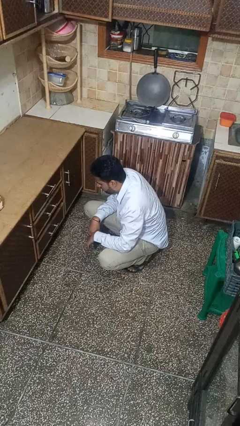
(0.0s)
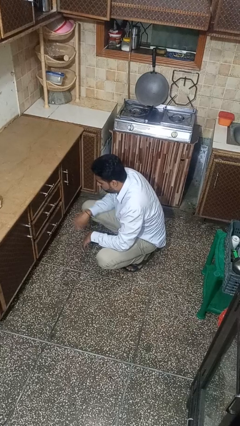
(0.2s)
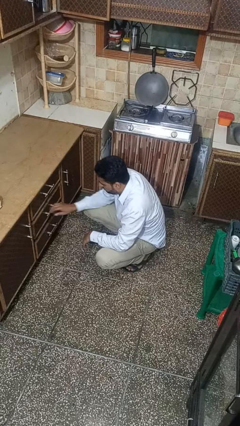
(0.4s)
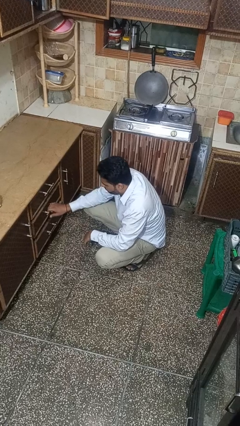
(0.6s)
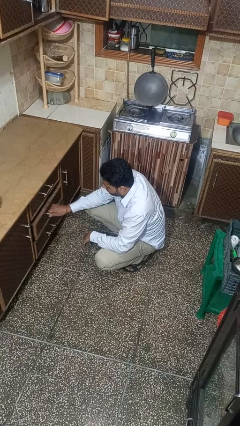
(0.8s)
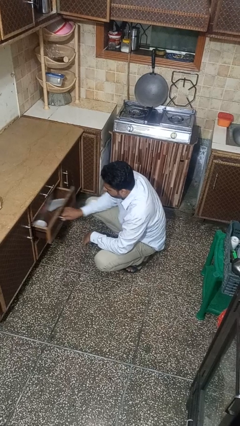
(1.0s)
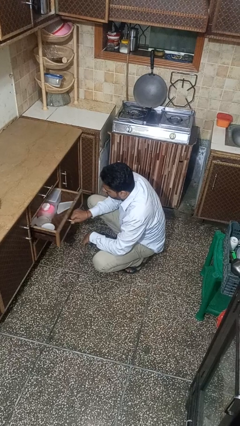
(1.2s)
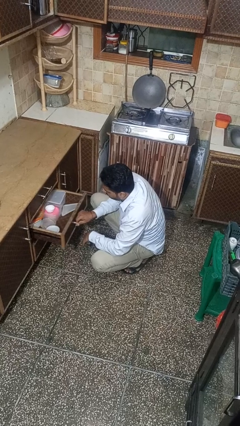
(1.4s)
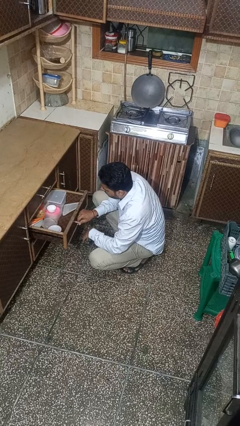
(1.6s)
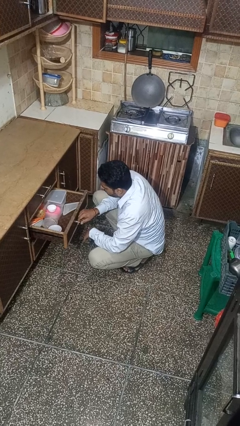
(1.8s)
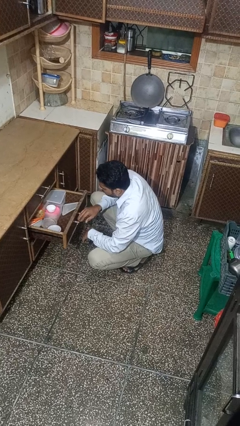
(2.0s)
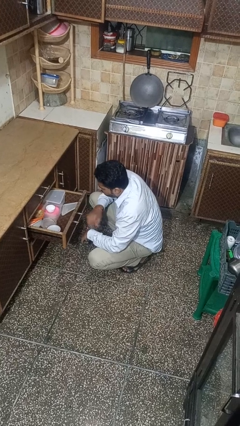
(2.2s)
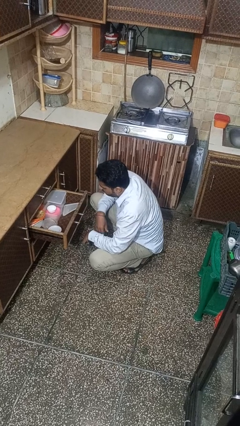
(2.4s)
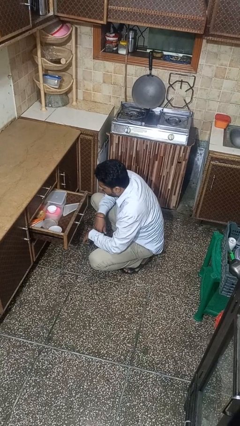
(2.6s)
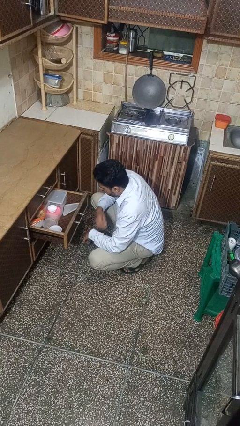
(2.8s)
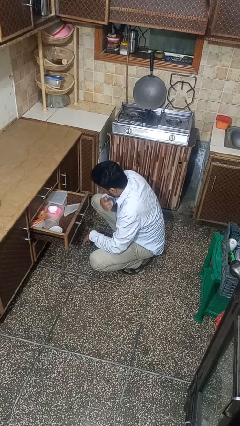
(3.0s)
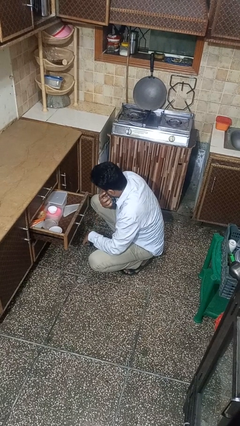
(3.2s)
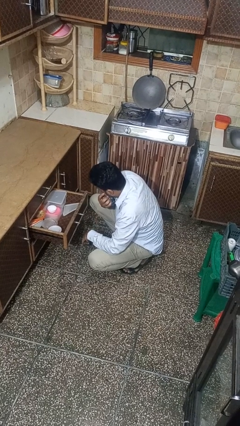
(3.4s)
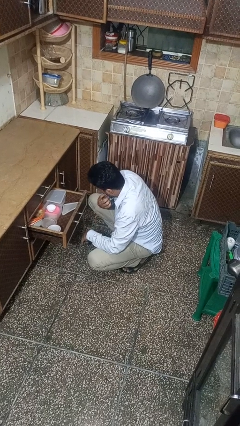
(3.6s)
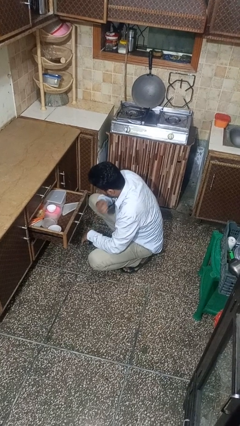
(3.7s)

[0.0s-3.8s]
person opens kitchen drawer

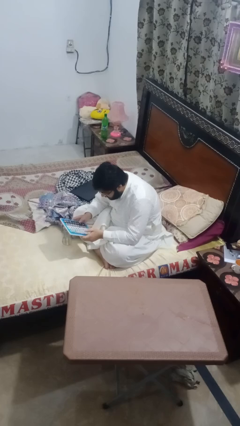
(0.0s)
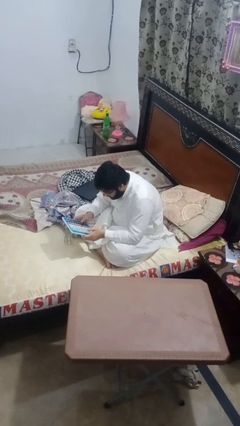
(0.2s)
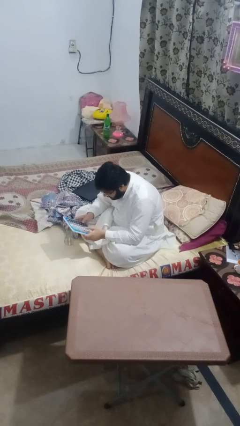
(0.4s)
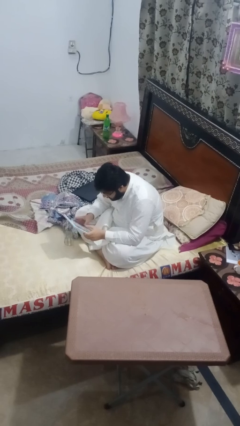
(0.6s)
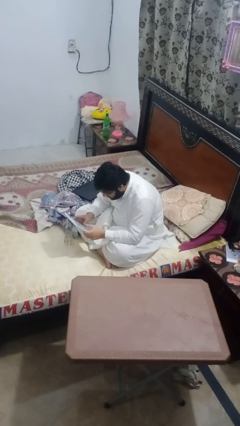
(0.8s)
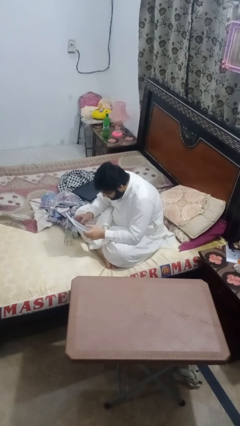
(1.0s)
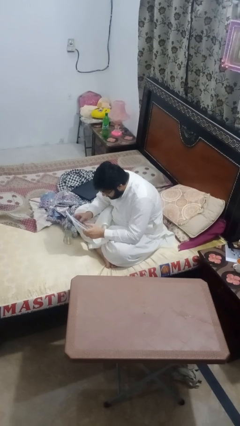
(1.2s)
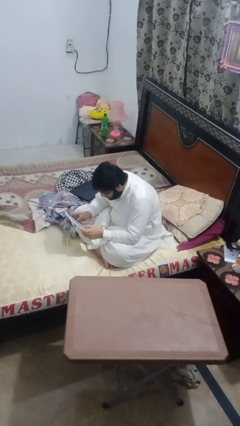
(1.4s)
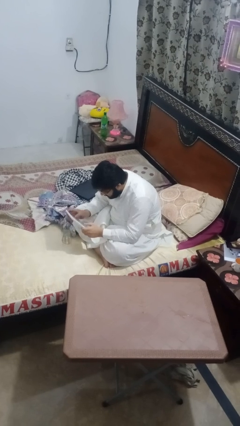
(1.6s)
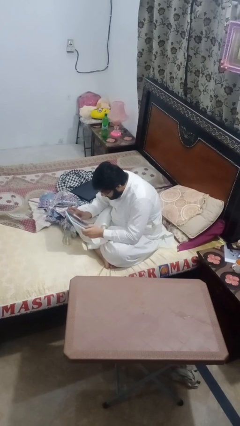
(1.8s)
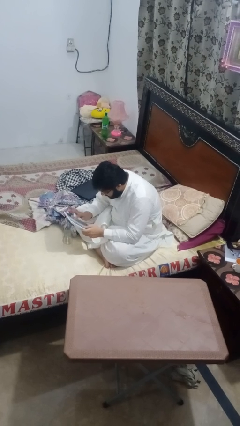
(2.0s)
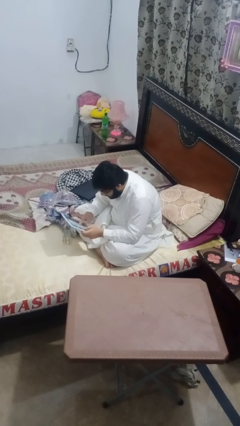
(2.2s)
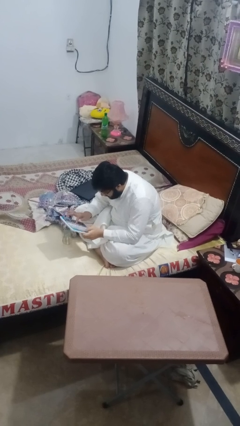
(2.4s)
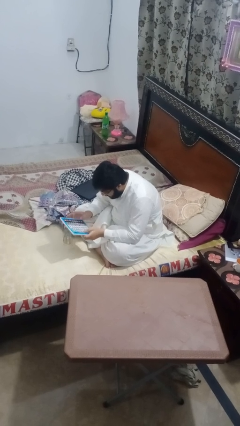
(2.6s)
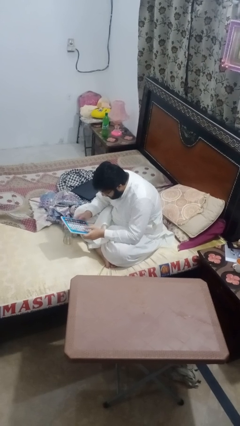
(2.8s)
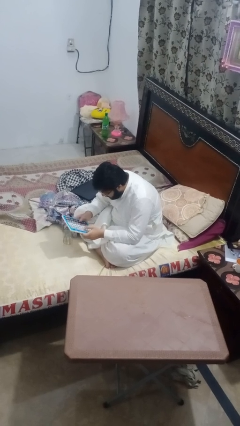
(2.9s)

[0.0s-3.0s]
person interacts with tablet

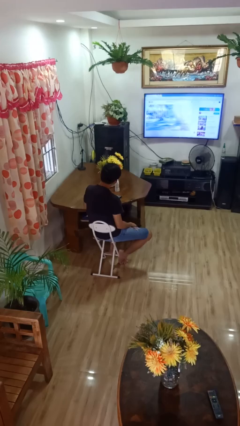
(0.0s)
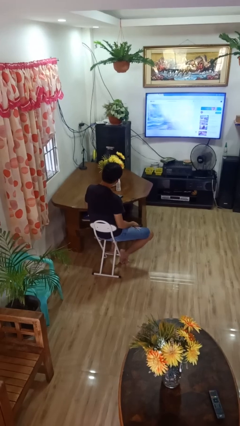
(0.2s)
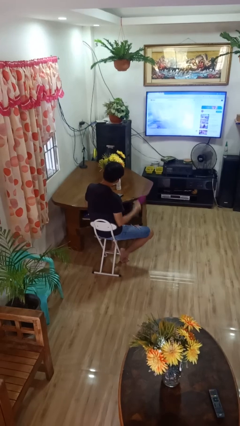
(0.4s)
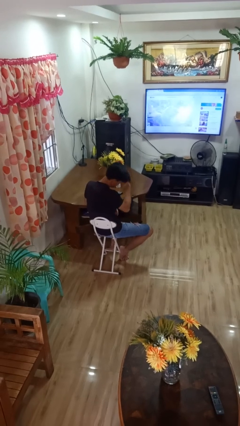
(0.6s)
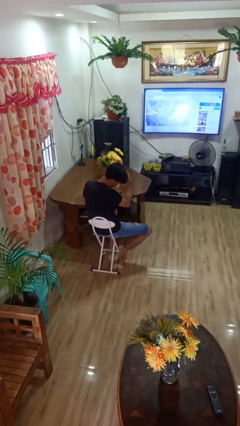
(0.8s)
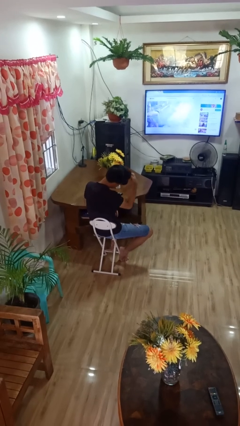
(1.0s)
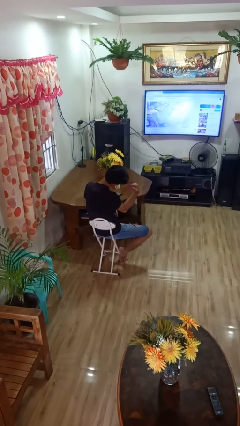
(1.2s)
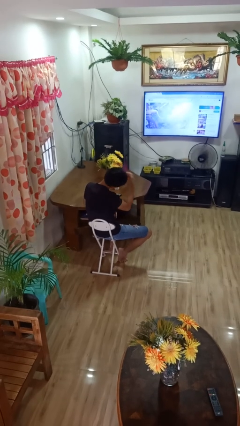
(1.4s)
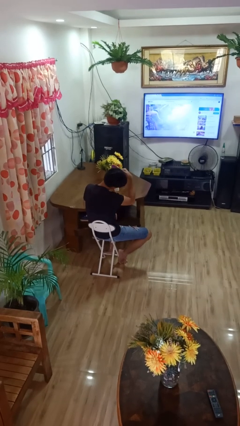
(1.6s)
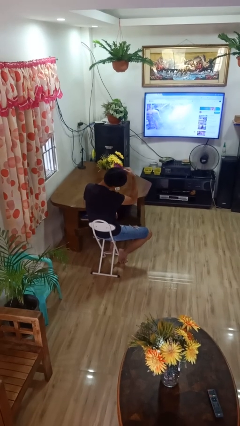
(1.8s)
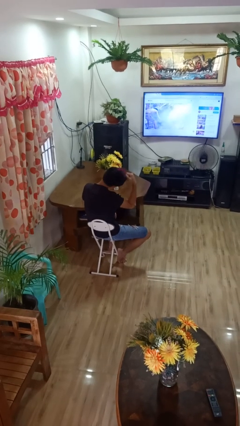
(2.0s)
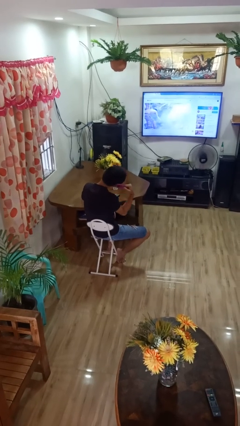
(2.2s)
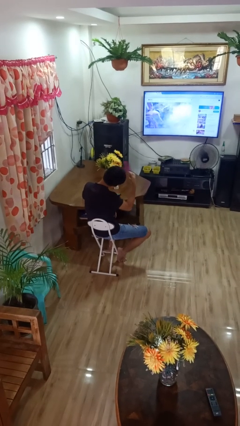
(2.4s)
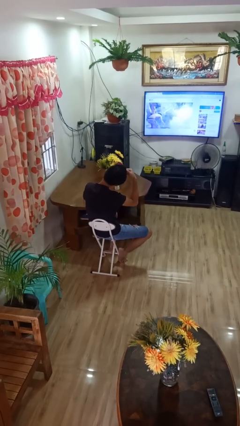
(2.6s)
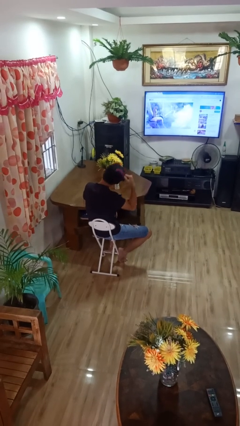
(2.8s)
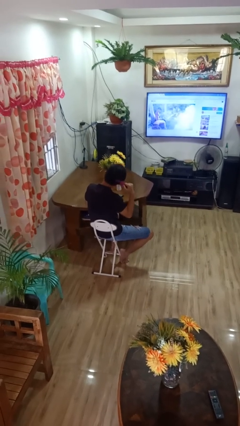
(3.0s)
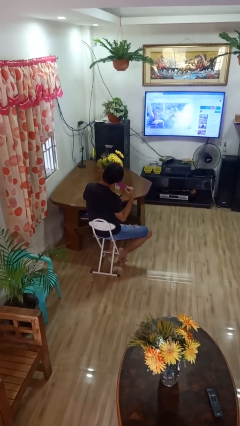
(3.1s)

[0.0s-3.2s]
person brushes hair

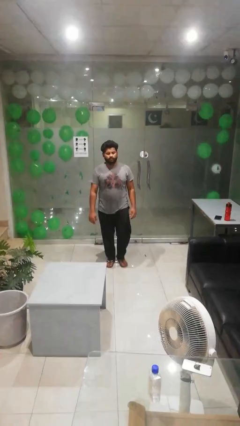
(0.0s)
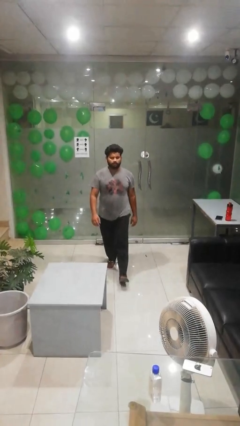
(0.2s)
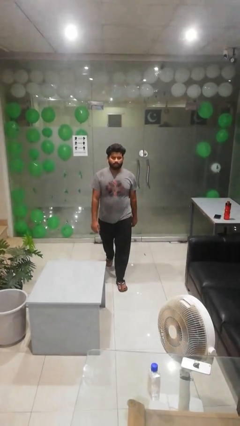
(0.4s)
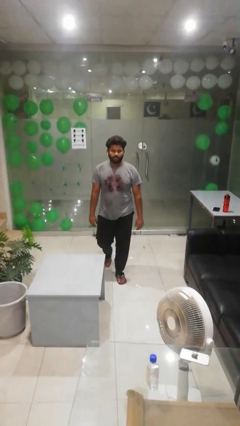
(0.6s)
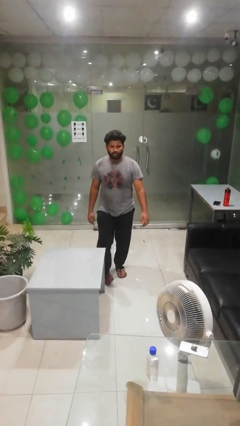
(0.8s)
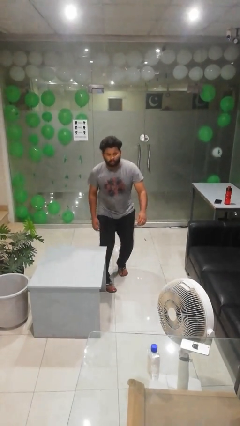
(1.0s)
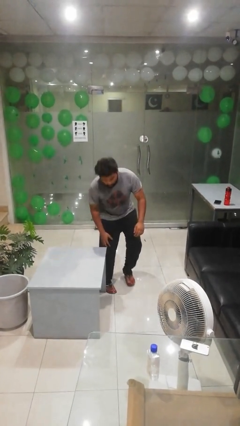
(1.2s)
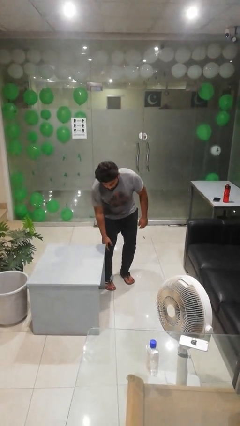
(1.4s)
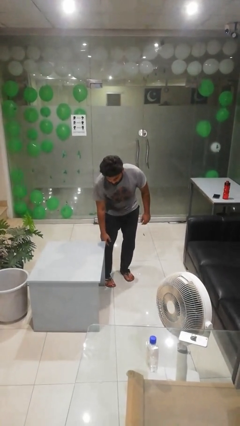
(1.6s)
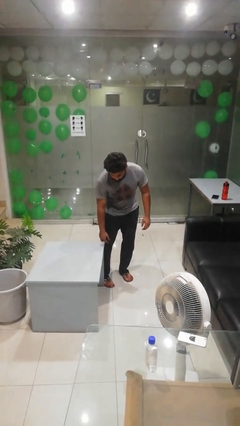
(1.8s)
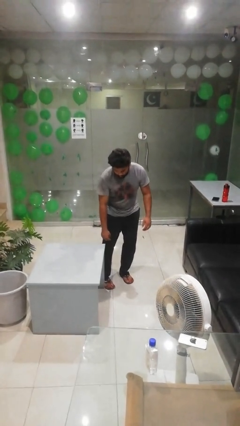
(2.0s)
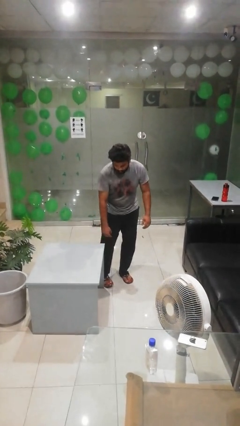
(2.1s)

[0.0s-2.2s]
person bumps into table

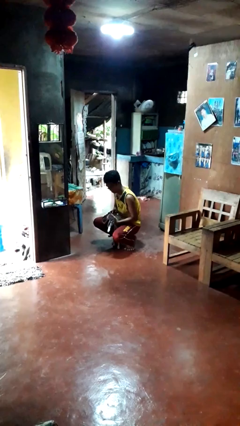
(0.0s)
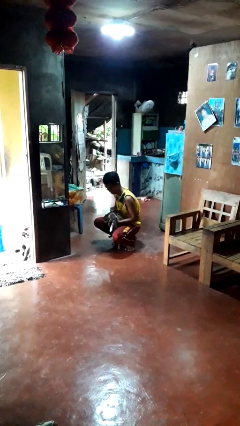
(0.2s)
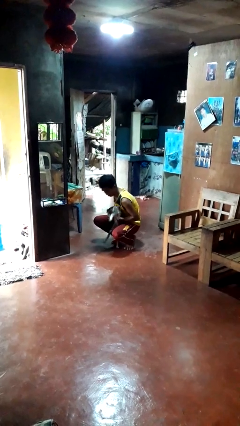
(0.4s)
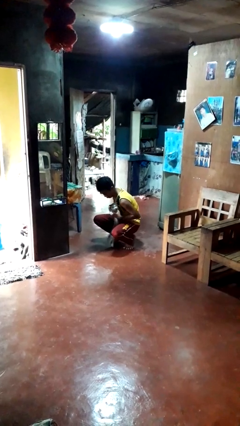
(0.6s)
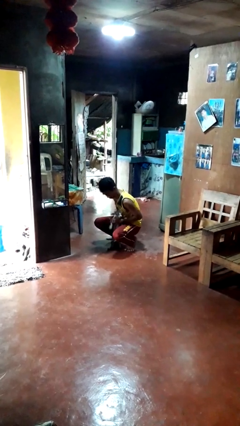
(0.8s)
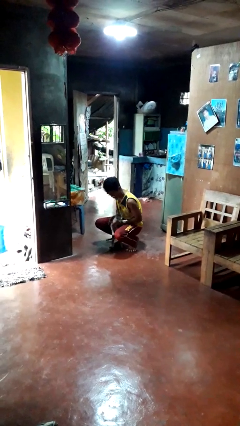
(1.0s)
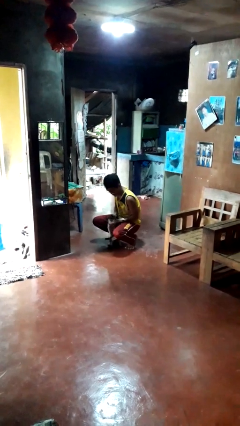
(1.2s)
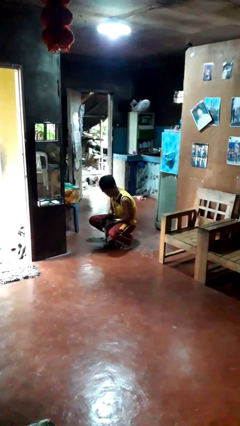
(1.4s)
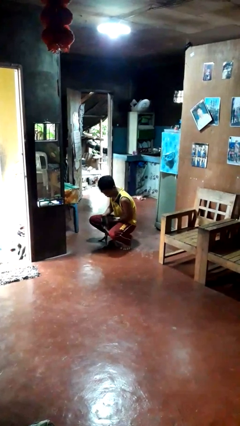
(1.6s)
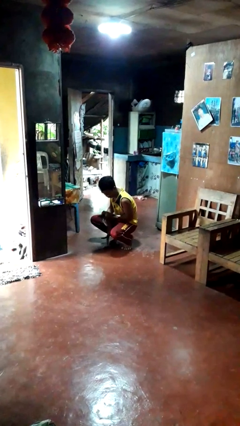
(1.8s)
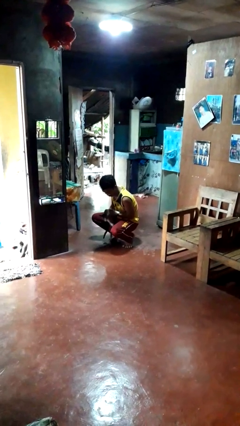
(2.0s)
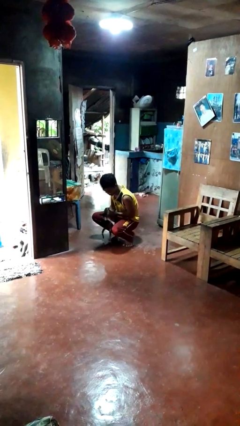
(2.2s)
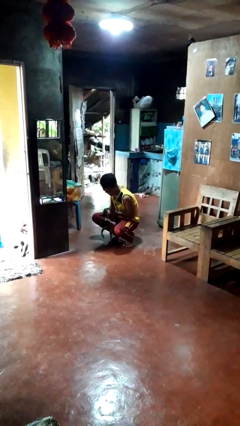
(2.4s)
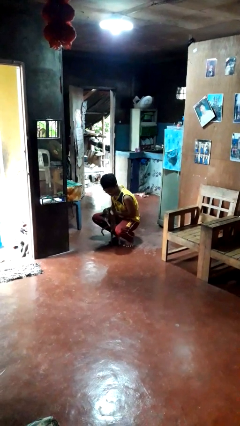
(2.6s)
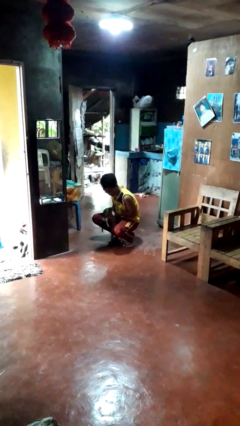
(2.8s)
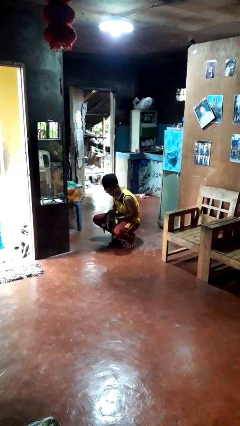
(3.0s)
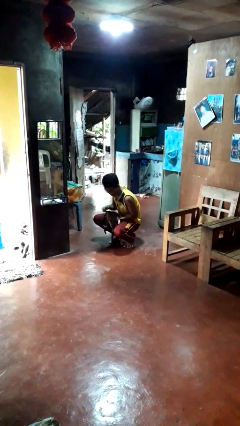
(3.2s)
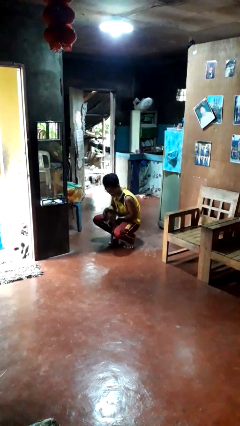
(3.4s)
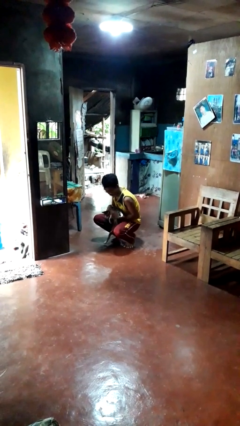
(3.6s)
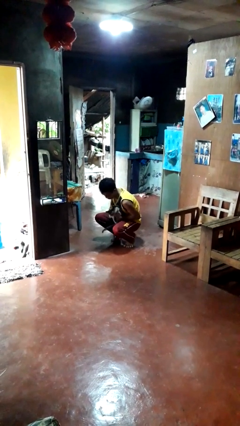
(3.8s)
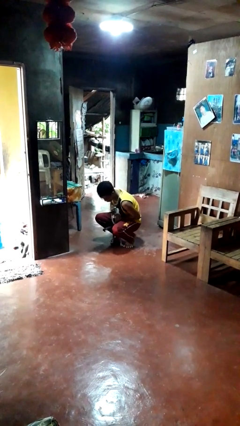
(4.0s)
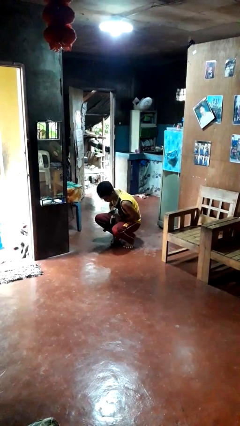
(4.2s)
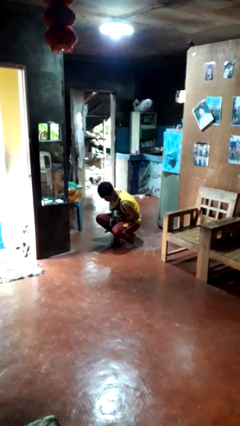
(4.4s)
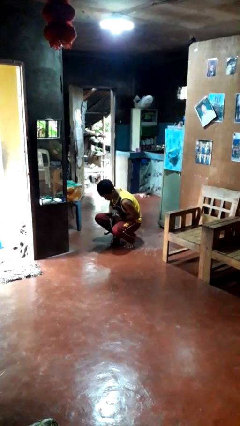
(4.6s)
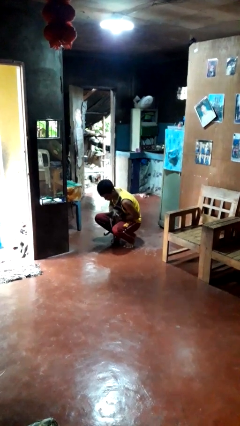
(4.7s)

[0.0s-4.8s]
person hugs cat

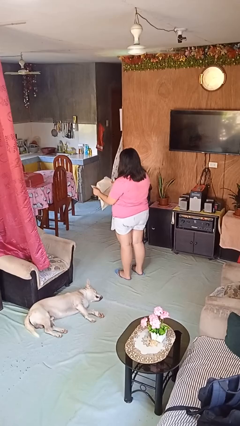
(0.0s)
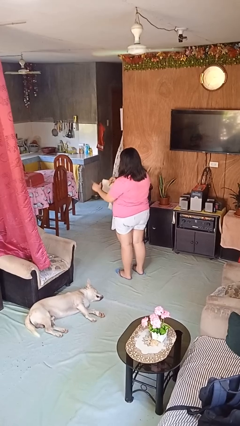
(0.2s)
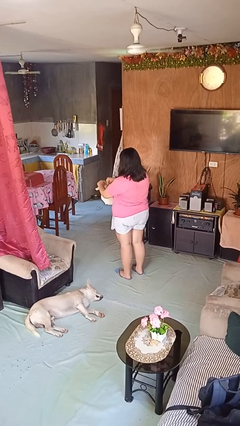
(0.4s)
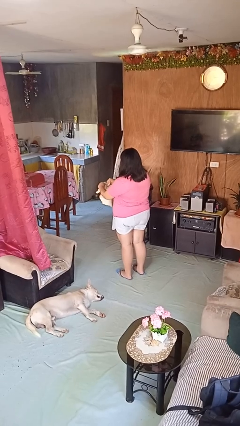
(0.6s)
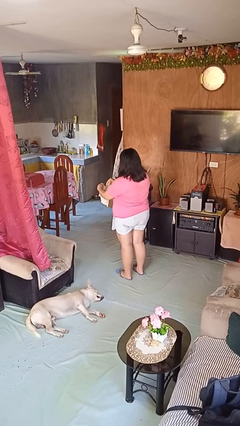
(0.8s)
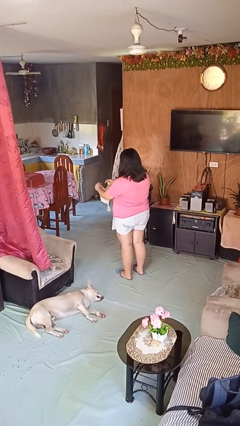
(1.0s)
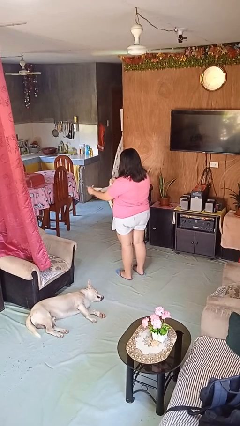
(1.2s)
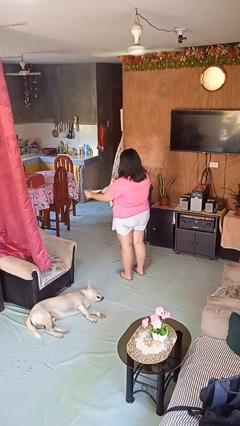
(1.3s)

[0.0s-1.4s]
person tears paper
